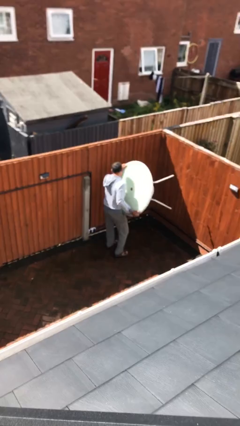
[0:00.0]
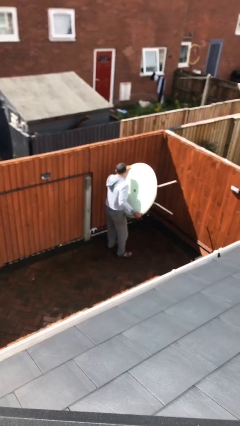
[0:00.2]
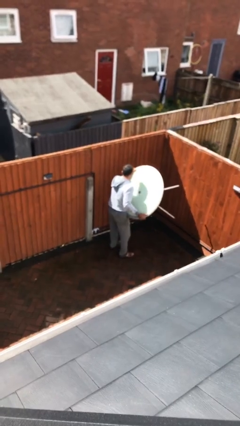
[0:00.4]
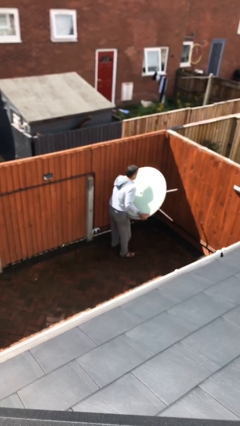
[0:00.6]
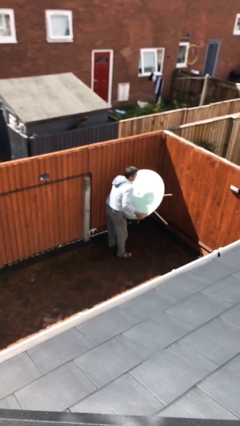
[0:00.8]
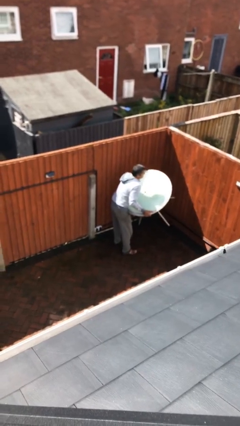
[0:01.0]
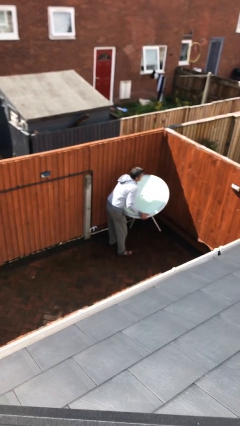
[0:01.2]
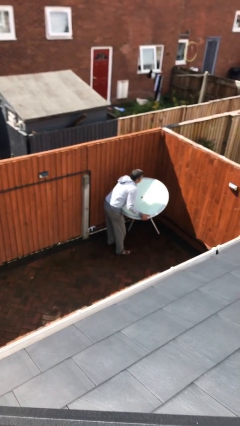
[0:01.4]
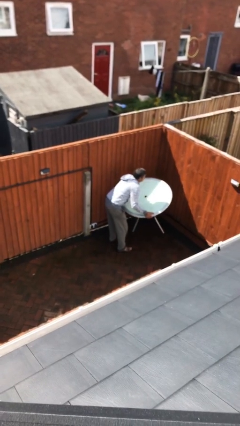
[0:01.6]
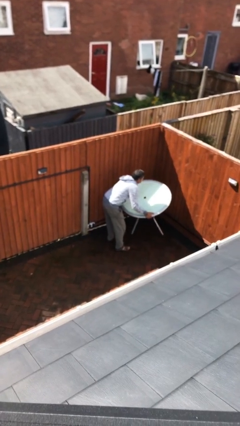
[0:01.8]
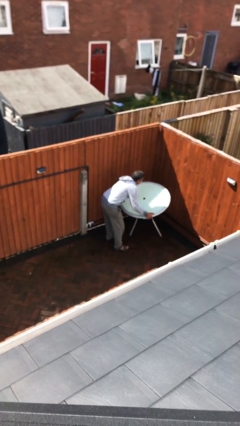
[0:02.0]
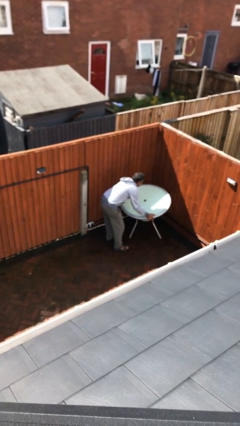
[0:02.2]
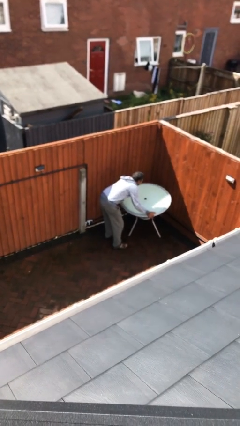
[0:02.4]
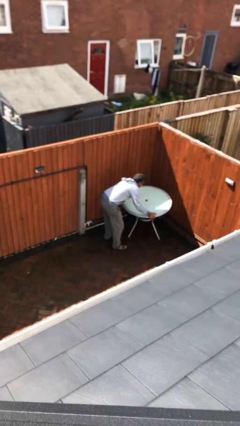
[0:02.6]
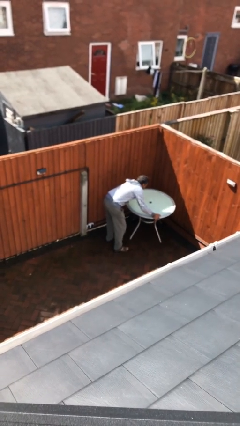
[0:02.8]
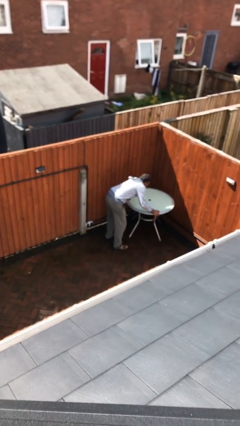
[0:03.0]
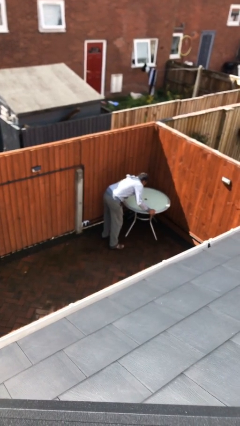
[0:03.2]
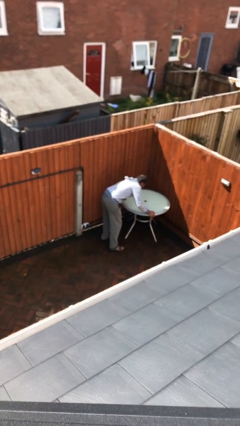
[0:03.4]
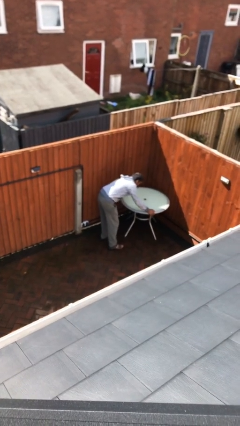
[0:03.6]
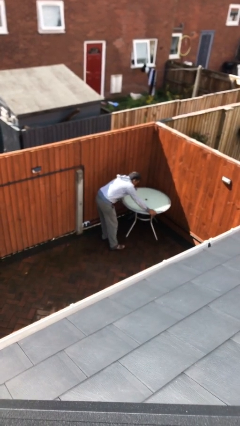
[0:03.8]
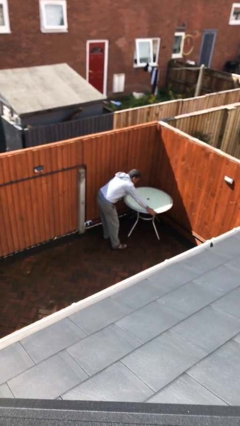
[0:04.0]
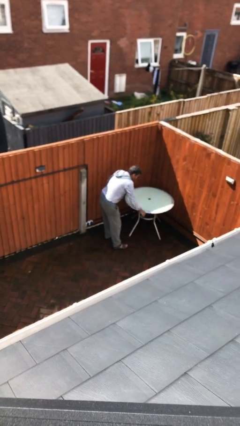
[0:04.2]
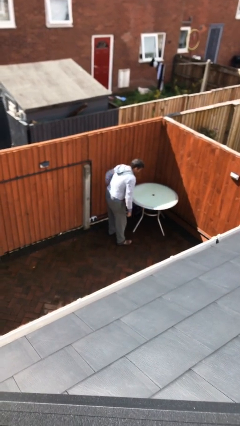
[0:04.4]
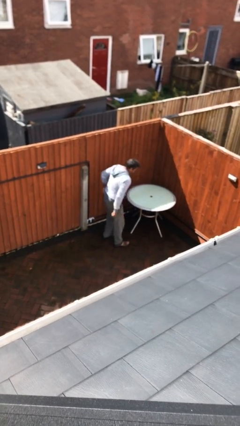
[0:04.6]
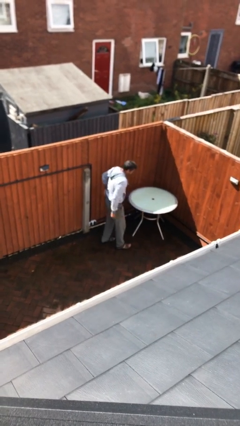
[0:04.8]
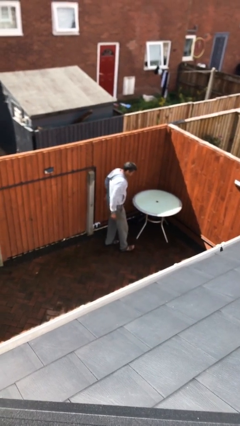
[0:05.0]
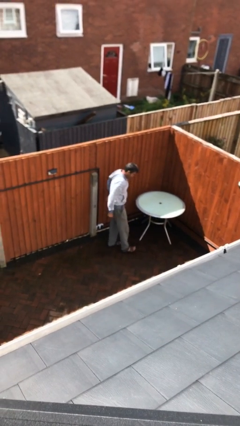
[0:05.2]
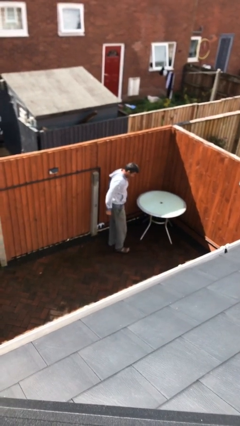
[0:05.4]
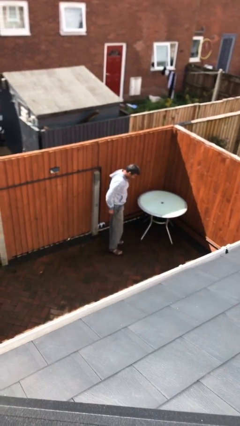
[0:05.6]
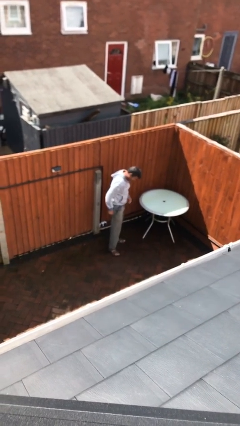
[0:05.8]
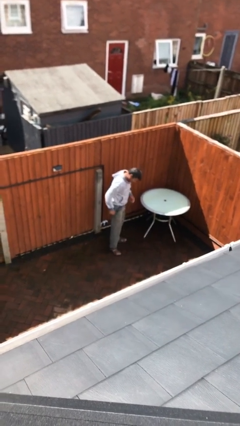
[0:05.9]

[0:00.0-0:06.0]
person puts down object on floor

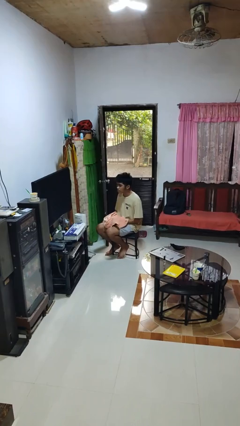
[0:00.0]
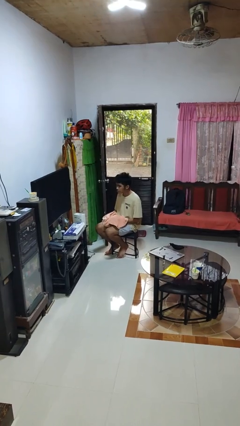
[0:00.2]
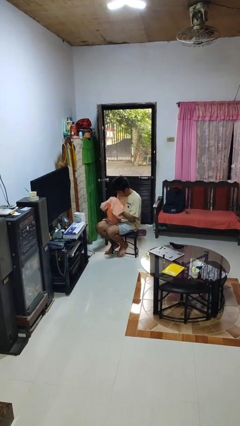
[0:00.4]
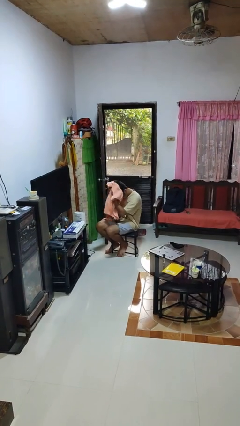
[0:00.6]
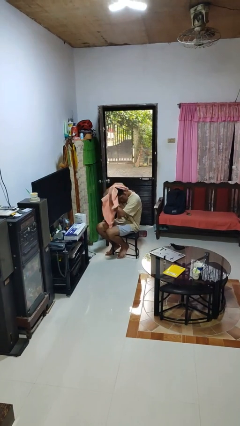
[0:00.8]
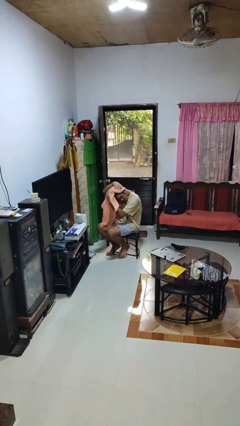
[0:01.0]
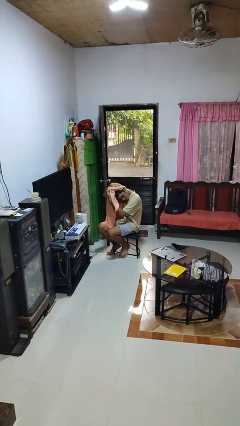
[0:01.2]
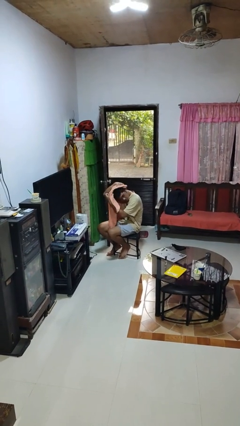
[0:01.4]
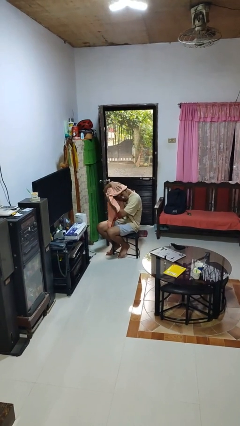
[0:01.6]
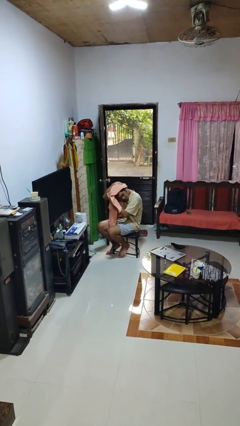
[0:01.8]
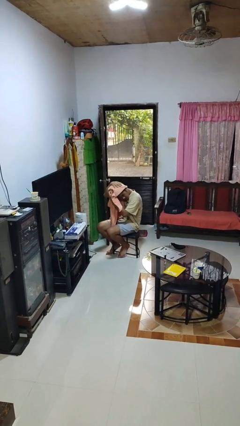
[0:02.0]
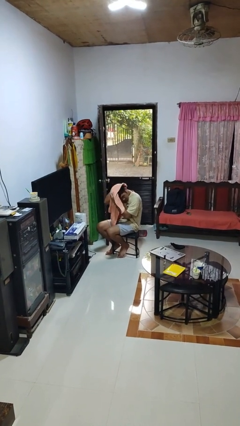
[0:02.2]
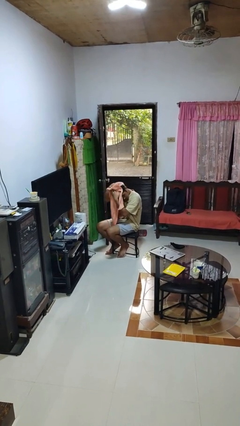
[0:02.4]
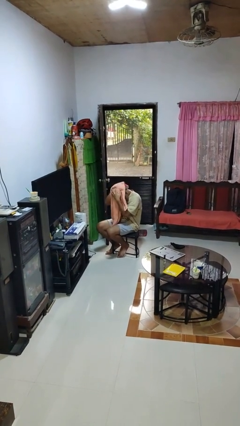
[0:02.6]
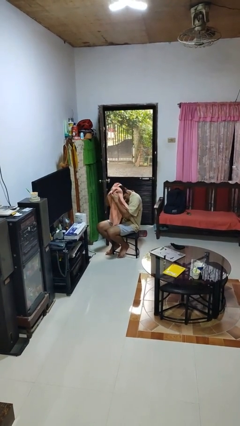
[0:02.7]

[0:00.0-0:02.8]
person dries hair with towel

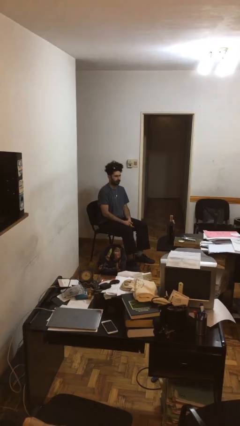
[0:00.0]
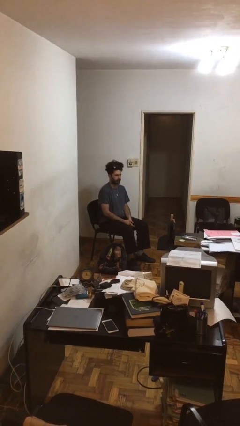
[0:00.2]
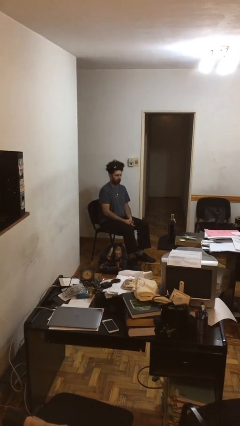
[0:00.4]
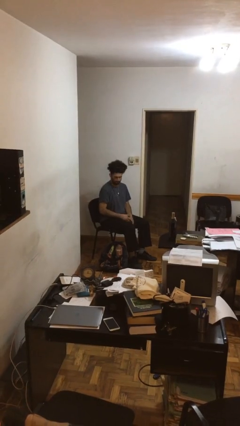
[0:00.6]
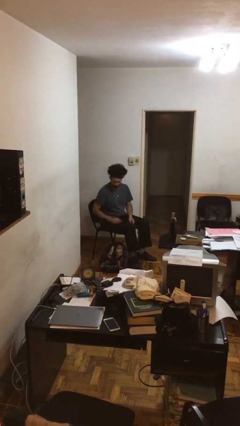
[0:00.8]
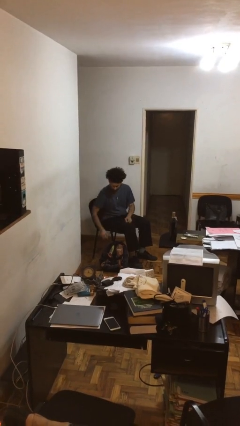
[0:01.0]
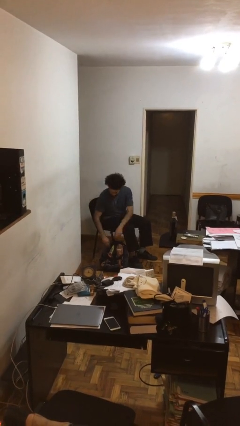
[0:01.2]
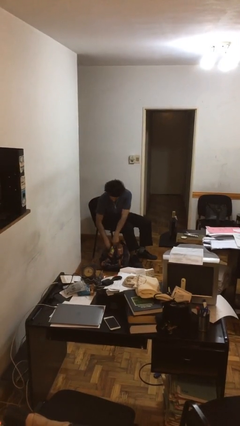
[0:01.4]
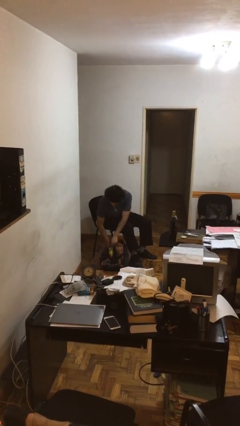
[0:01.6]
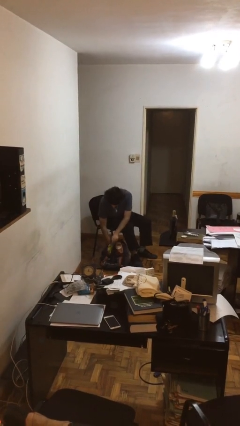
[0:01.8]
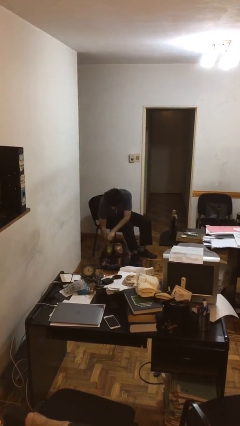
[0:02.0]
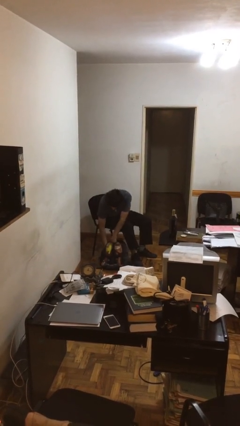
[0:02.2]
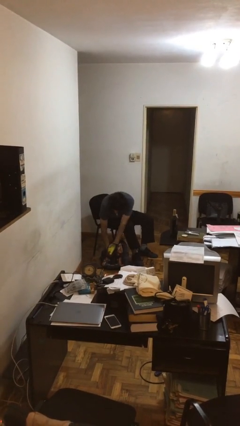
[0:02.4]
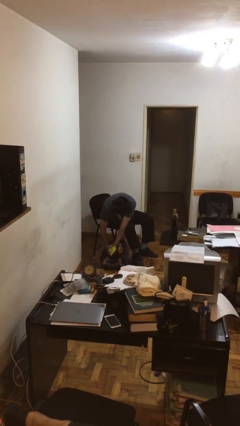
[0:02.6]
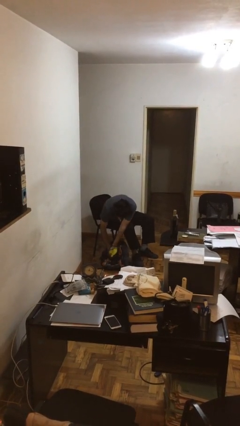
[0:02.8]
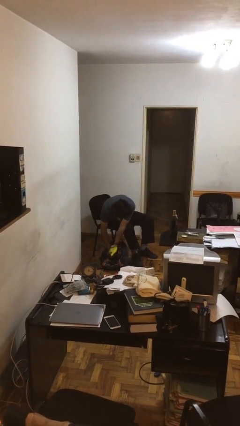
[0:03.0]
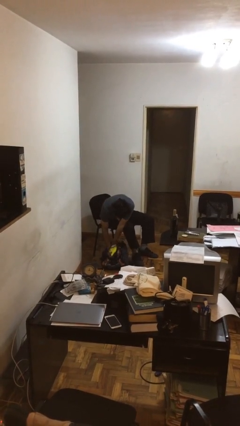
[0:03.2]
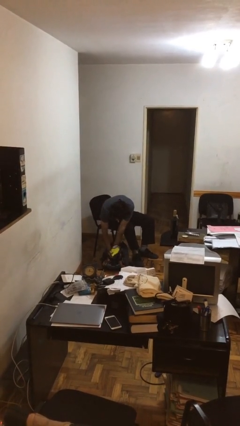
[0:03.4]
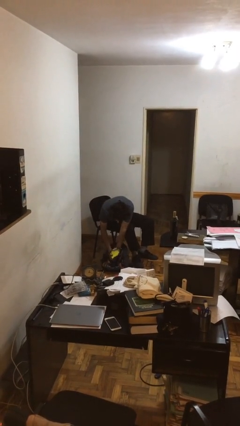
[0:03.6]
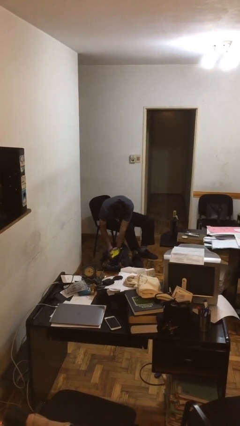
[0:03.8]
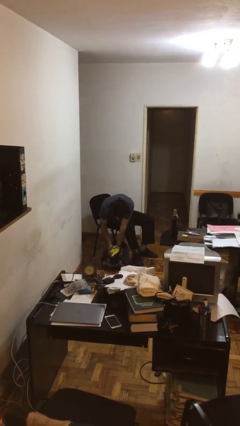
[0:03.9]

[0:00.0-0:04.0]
person searches in backpack

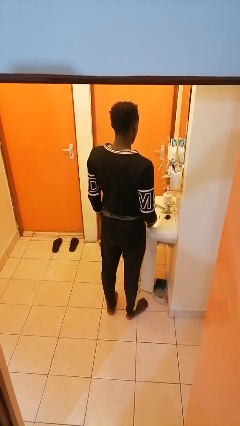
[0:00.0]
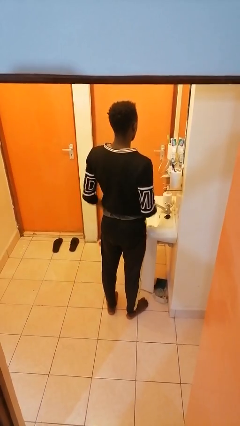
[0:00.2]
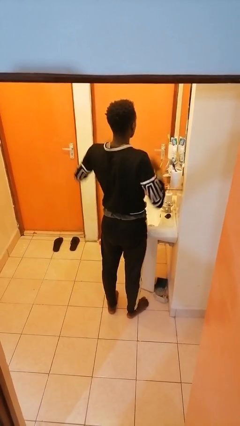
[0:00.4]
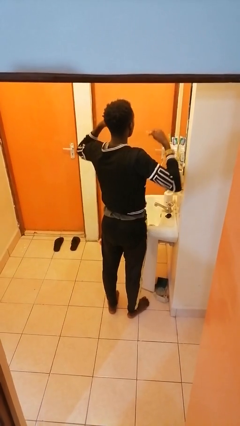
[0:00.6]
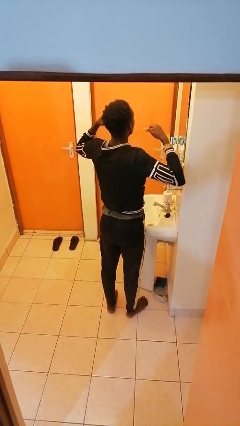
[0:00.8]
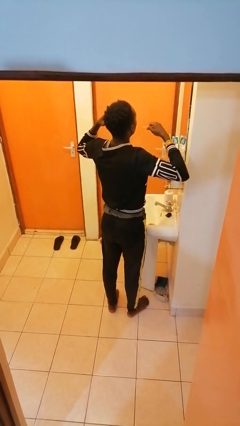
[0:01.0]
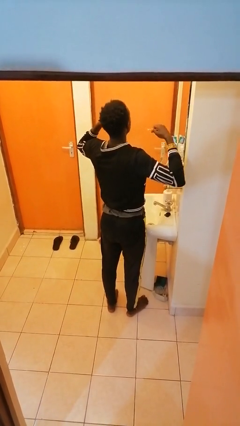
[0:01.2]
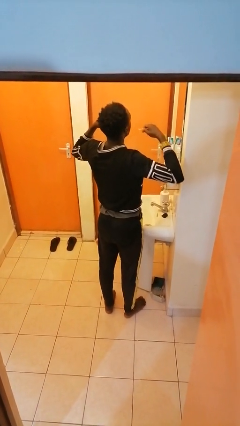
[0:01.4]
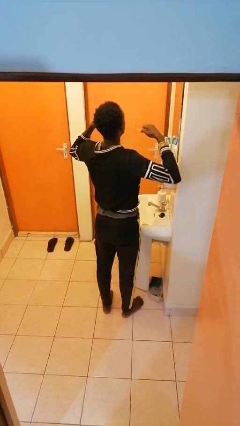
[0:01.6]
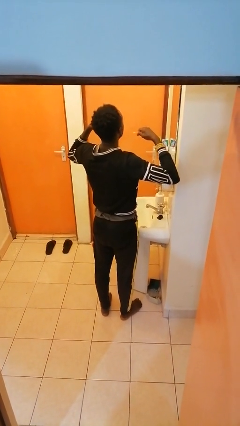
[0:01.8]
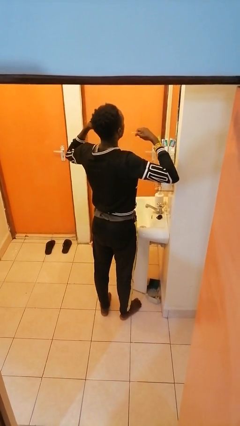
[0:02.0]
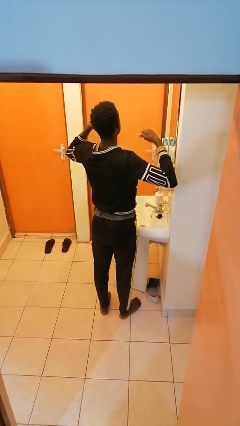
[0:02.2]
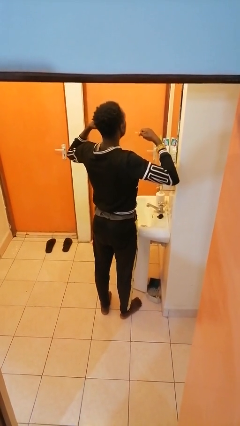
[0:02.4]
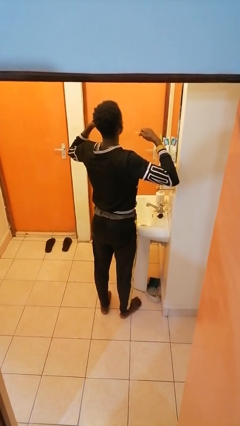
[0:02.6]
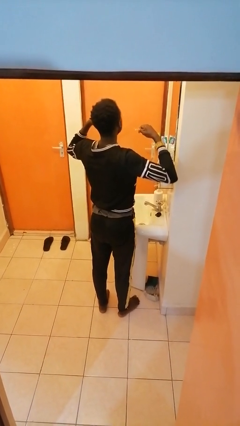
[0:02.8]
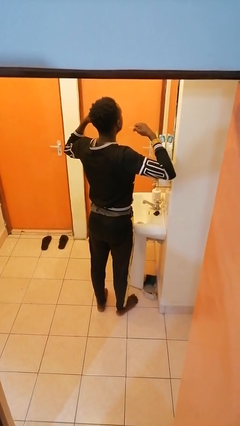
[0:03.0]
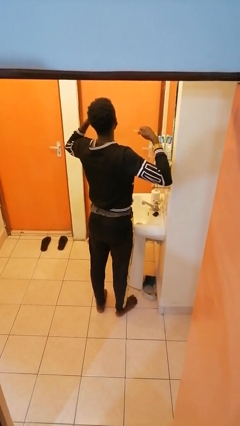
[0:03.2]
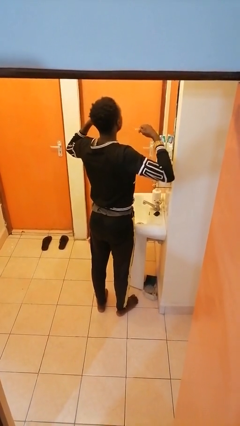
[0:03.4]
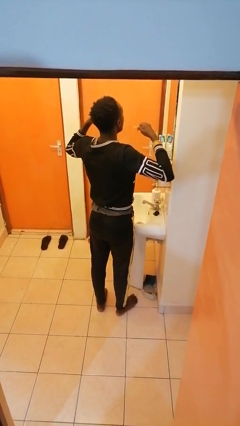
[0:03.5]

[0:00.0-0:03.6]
person flosses

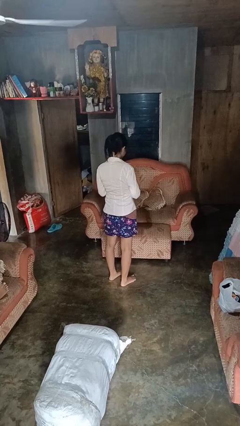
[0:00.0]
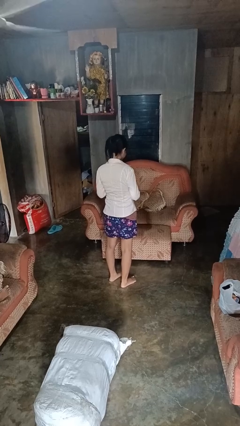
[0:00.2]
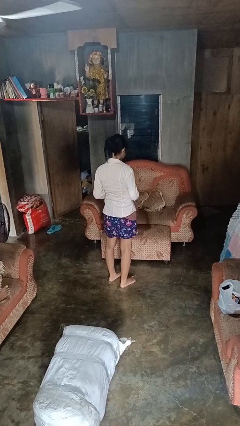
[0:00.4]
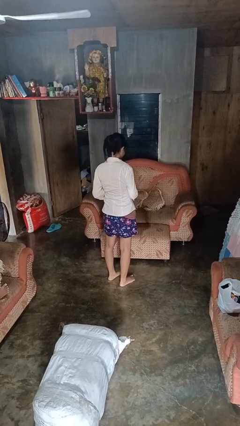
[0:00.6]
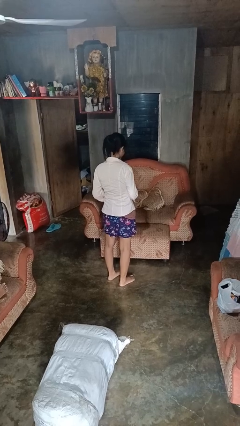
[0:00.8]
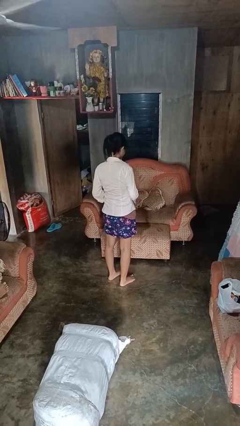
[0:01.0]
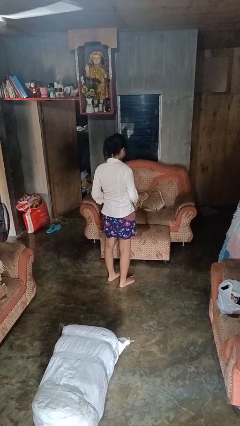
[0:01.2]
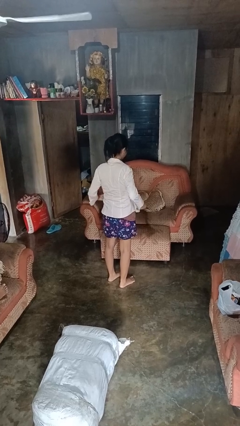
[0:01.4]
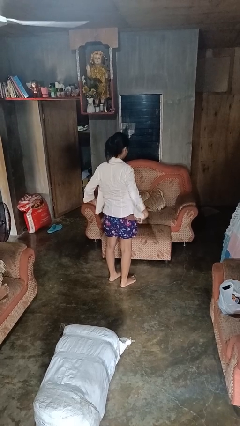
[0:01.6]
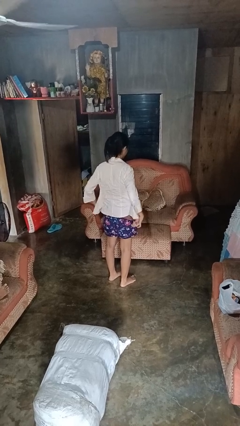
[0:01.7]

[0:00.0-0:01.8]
person unbuttons shirt
